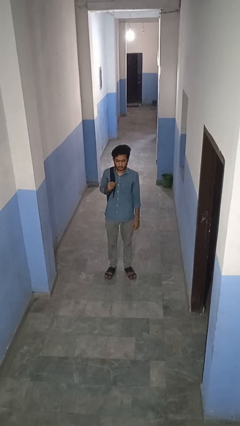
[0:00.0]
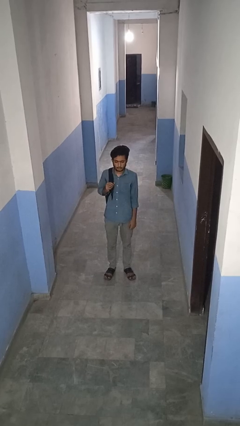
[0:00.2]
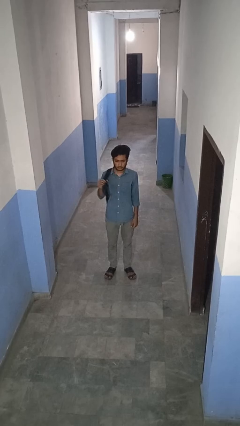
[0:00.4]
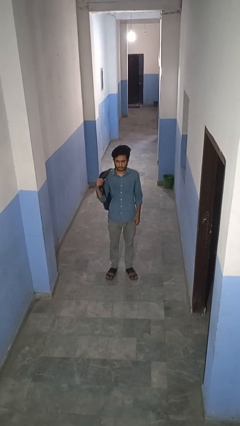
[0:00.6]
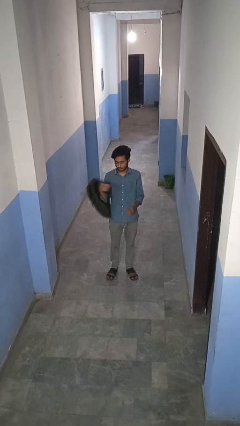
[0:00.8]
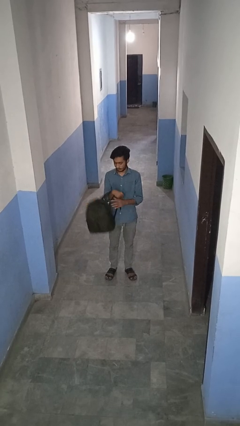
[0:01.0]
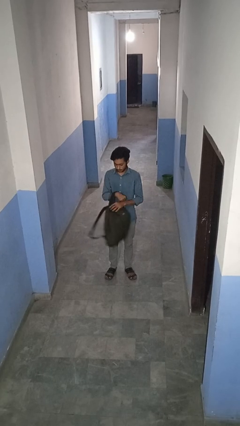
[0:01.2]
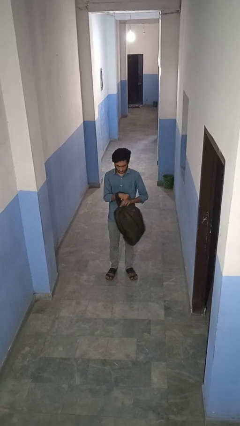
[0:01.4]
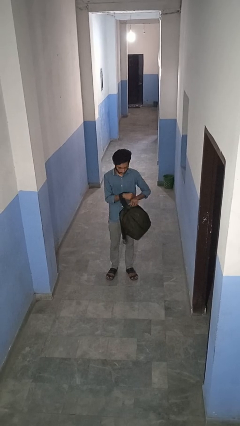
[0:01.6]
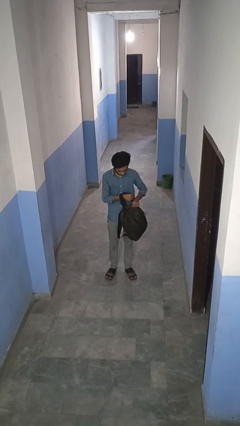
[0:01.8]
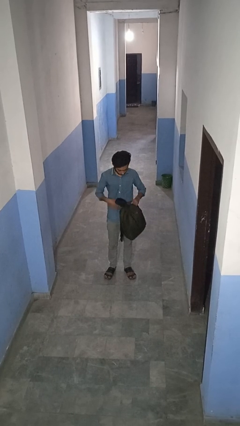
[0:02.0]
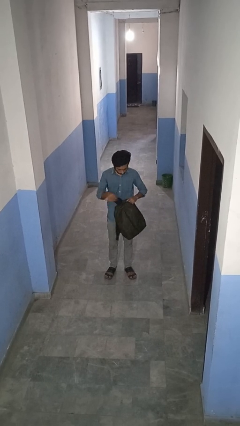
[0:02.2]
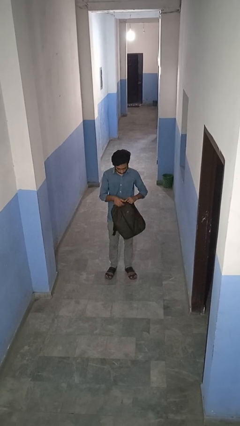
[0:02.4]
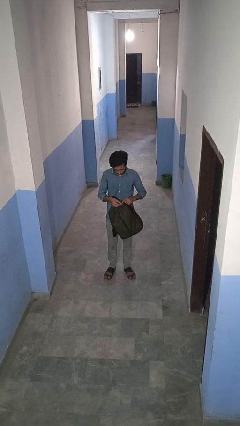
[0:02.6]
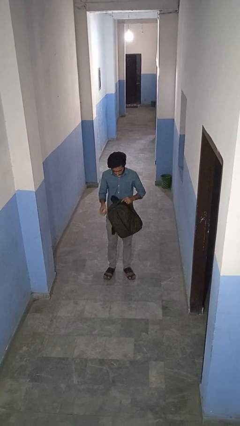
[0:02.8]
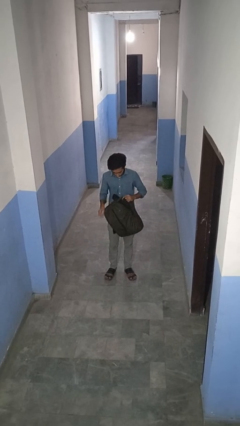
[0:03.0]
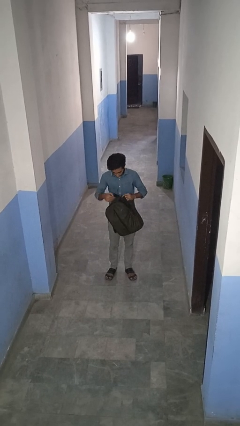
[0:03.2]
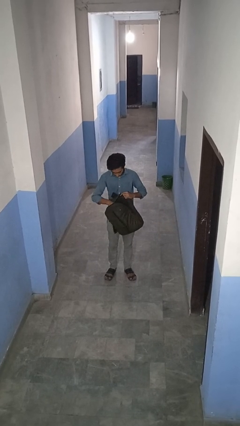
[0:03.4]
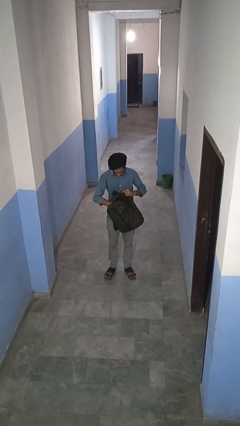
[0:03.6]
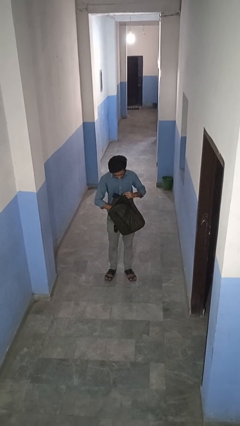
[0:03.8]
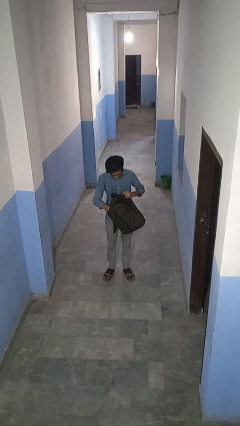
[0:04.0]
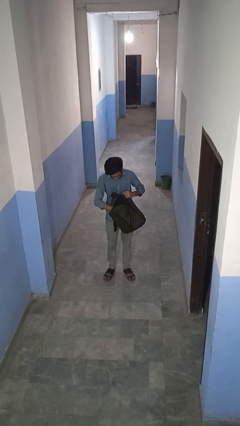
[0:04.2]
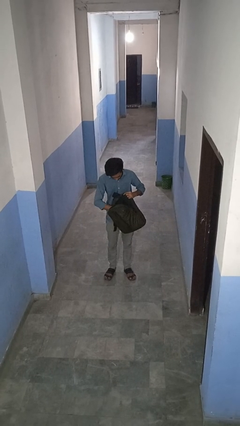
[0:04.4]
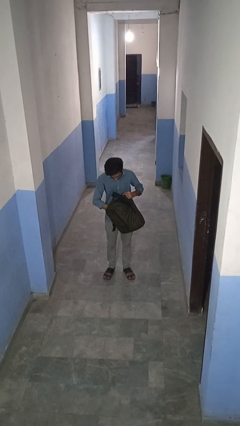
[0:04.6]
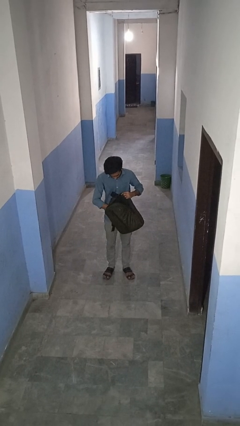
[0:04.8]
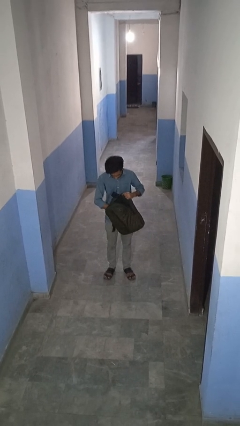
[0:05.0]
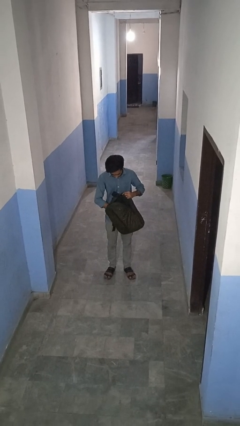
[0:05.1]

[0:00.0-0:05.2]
person searches in backpack

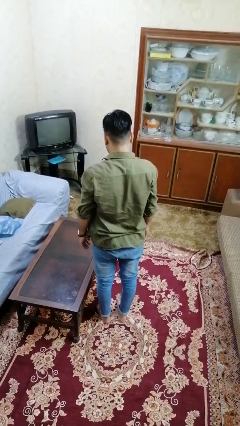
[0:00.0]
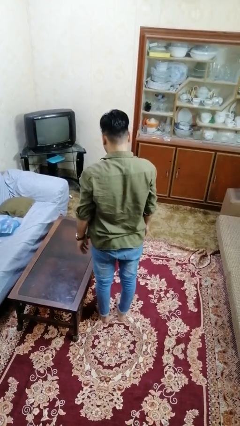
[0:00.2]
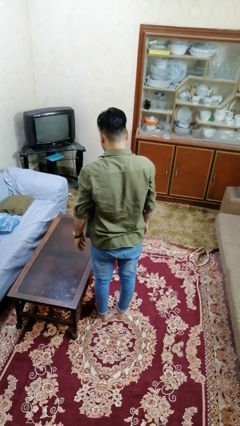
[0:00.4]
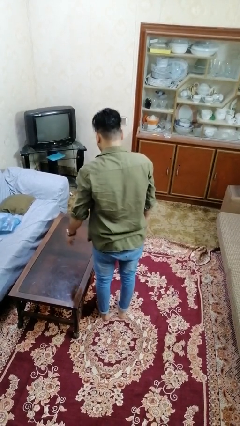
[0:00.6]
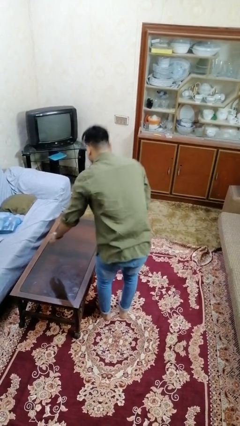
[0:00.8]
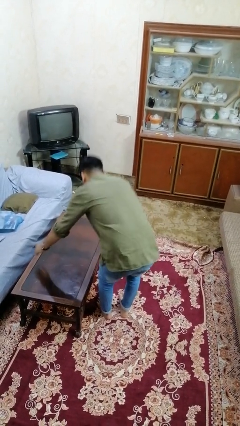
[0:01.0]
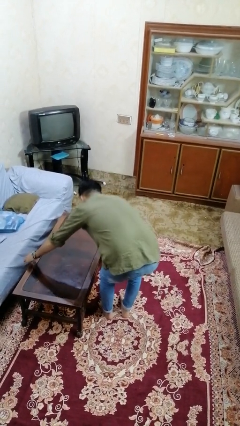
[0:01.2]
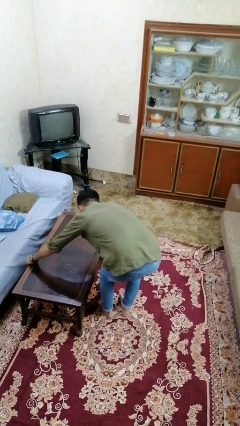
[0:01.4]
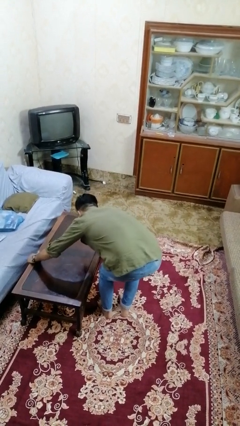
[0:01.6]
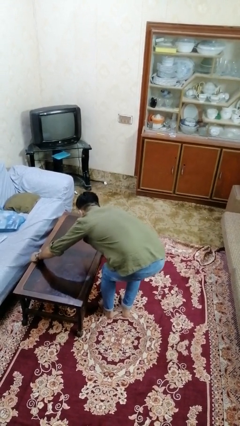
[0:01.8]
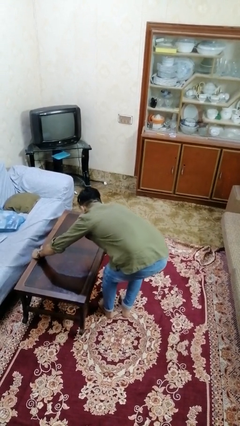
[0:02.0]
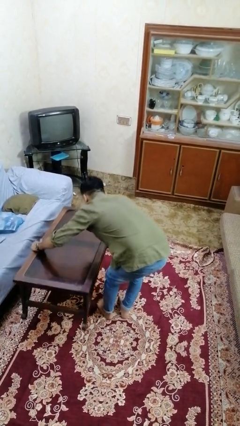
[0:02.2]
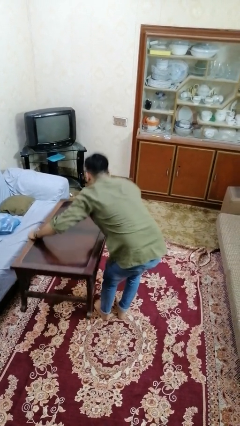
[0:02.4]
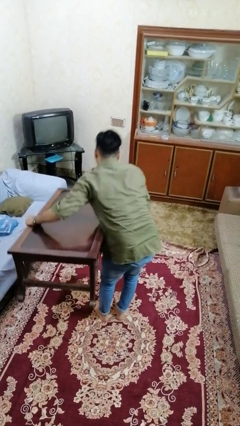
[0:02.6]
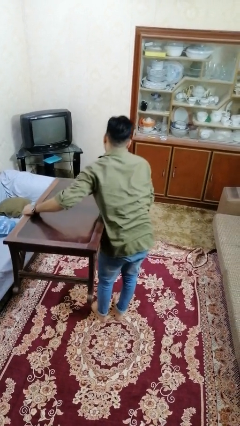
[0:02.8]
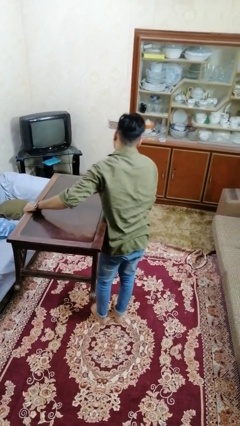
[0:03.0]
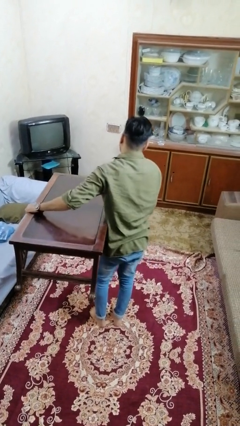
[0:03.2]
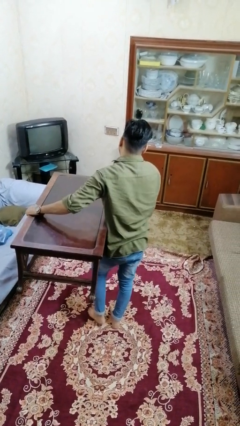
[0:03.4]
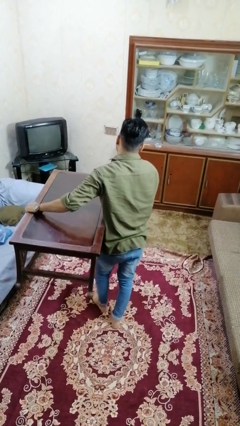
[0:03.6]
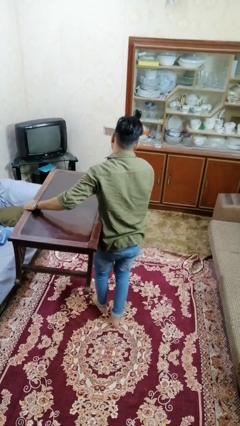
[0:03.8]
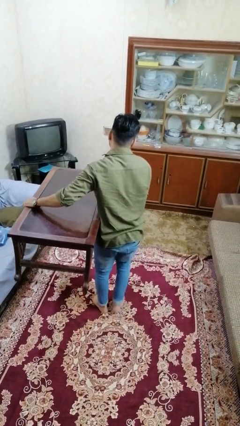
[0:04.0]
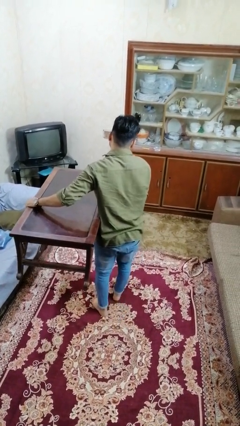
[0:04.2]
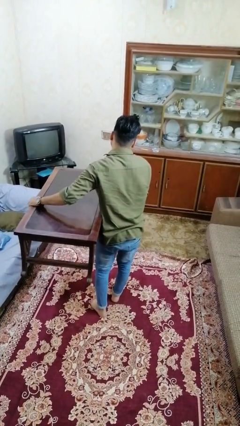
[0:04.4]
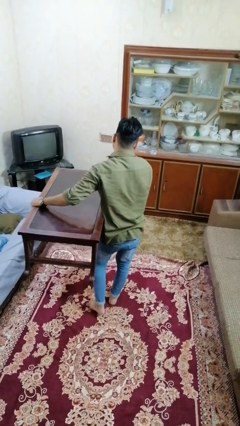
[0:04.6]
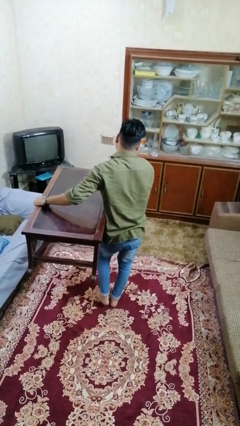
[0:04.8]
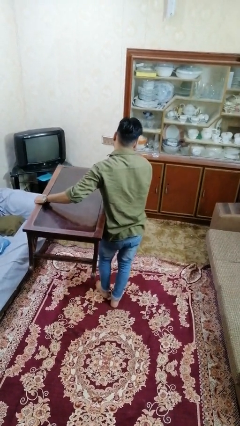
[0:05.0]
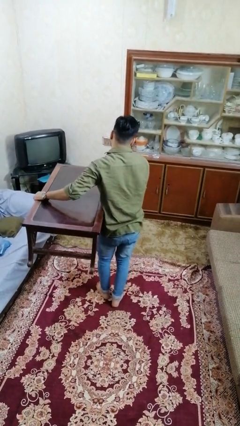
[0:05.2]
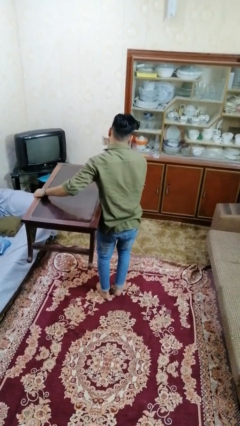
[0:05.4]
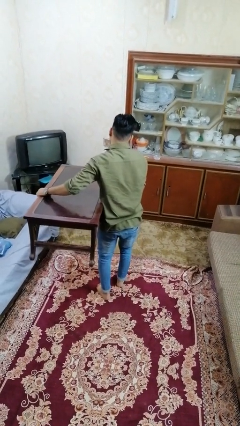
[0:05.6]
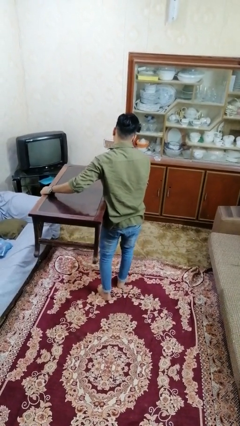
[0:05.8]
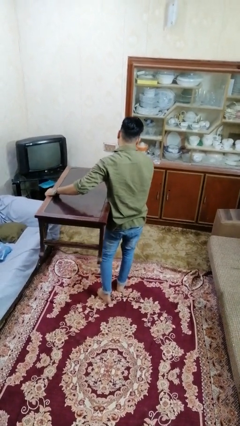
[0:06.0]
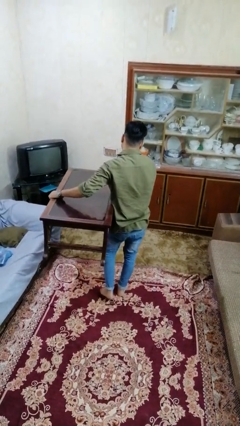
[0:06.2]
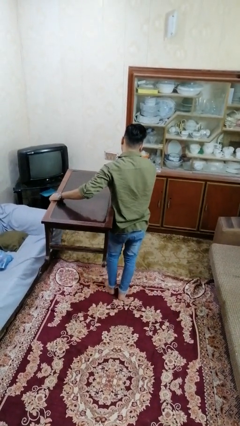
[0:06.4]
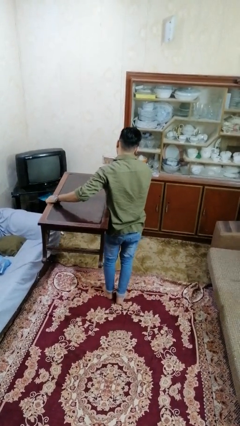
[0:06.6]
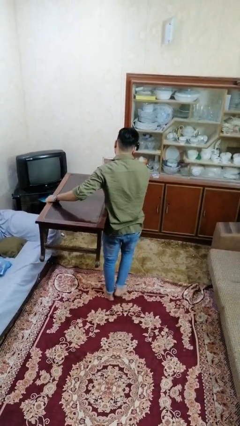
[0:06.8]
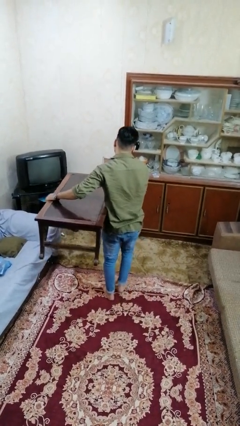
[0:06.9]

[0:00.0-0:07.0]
person carries furniture

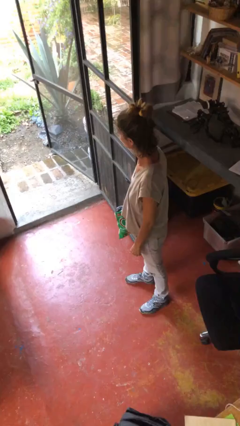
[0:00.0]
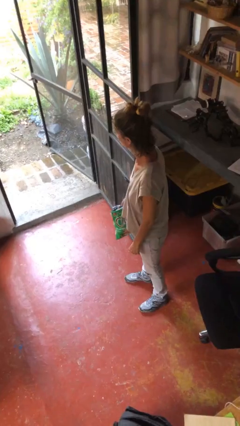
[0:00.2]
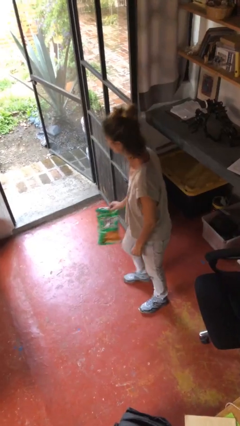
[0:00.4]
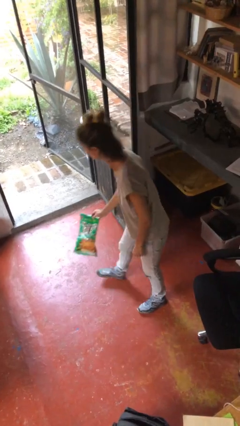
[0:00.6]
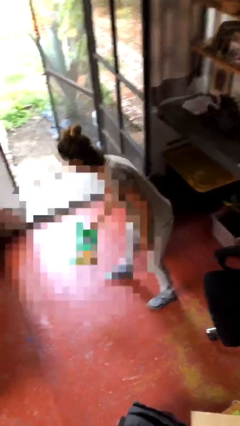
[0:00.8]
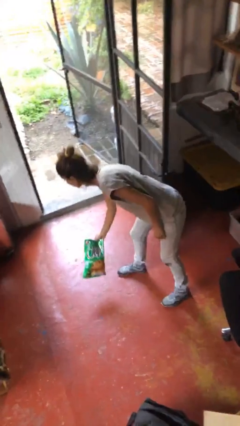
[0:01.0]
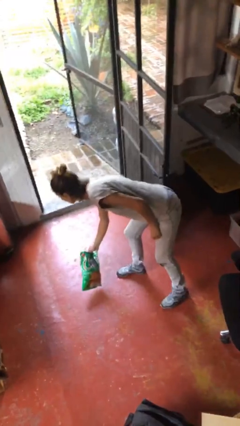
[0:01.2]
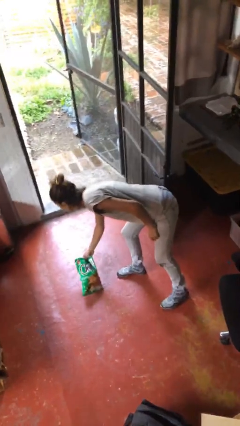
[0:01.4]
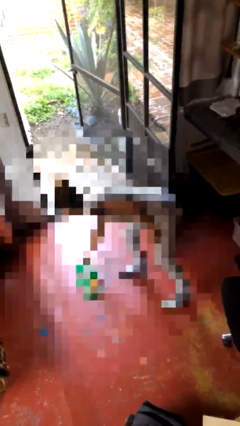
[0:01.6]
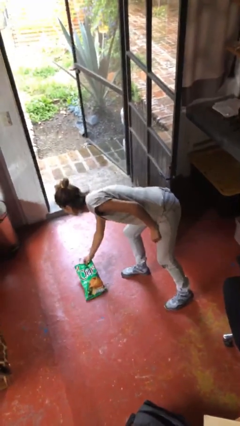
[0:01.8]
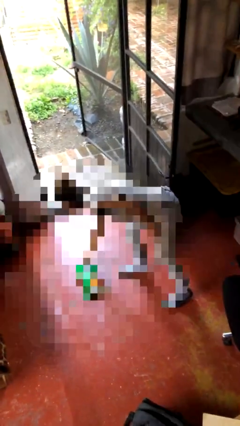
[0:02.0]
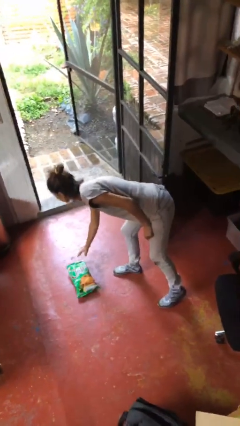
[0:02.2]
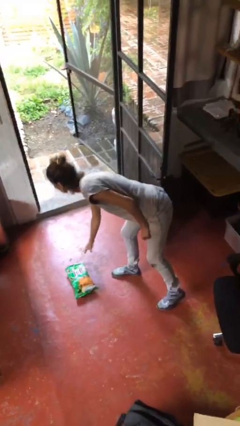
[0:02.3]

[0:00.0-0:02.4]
person puts down object on floor

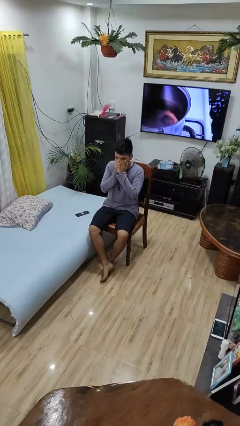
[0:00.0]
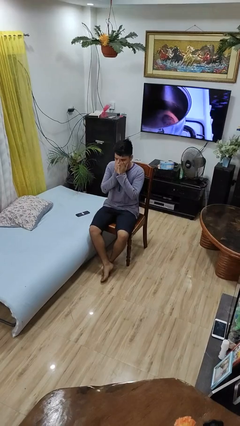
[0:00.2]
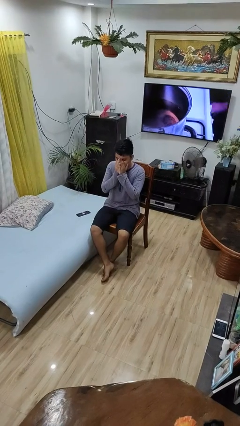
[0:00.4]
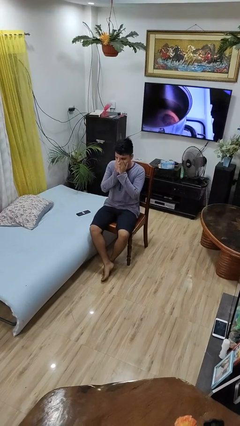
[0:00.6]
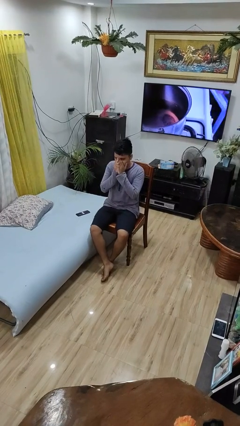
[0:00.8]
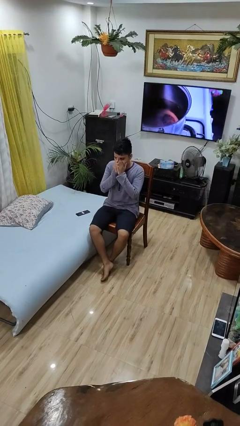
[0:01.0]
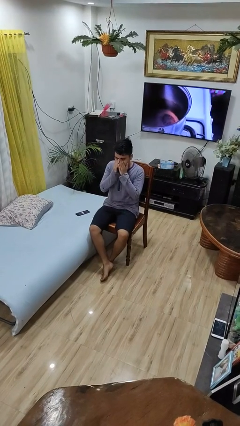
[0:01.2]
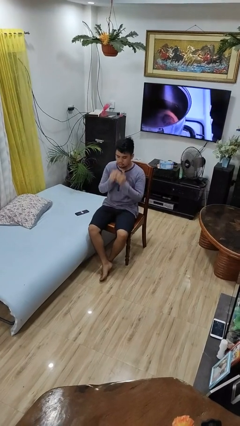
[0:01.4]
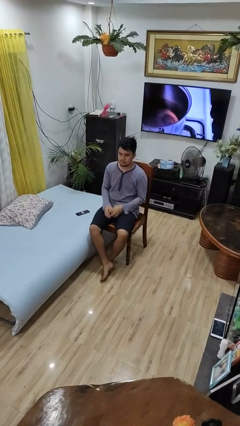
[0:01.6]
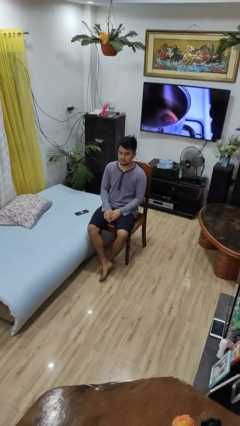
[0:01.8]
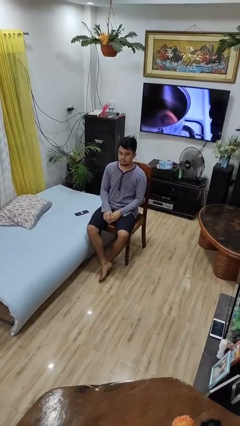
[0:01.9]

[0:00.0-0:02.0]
person sneezes into hand

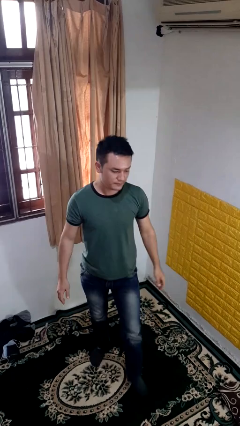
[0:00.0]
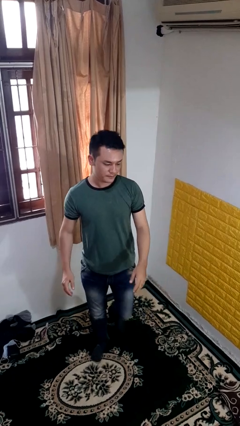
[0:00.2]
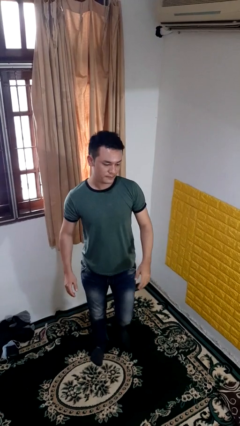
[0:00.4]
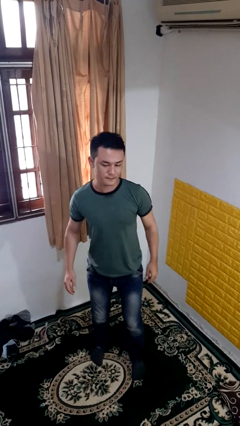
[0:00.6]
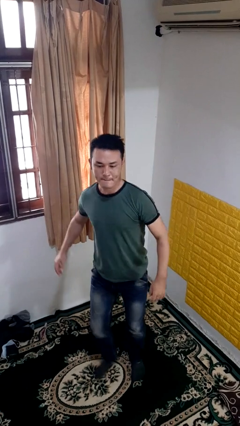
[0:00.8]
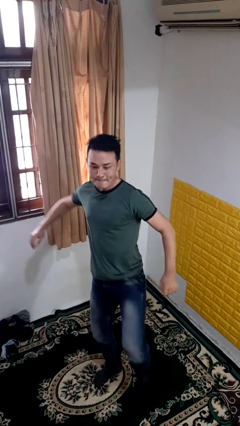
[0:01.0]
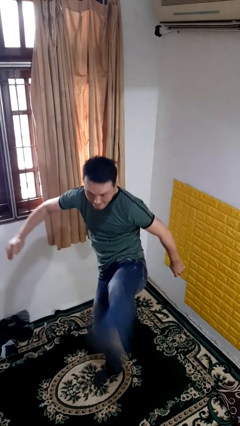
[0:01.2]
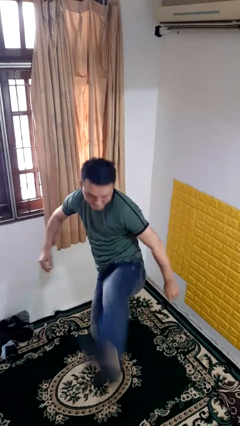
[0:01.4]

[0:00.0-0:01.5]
person karate kicks

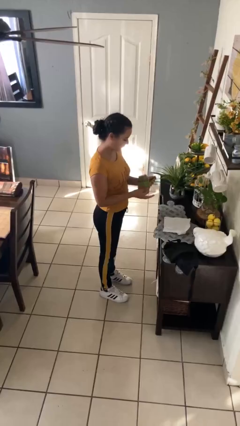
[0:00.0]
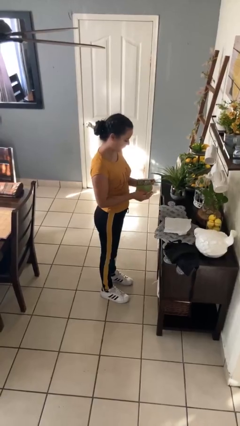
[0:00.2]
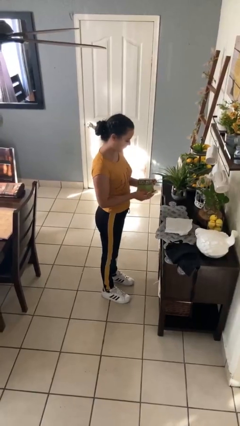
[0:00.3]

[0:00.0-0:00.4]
person tears paper
